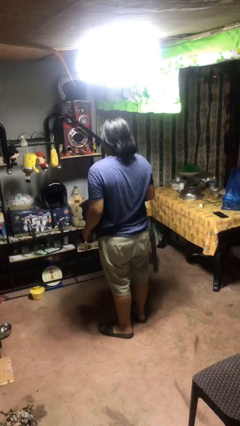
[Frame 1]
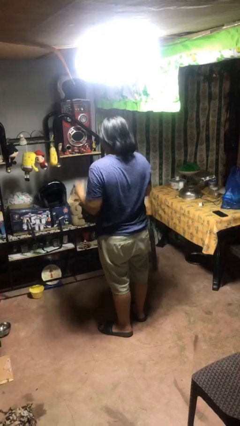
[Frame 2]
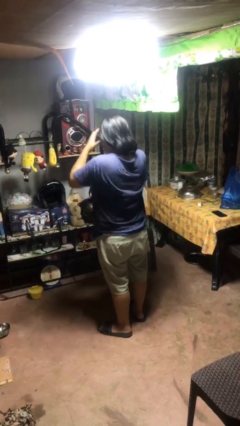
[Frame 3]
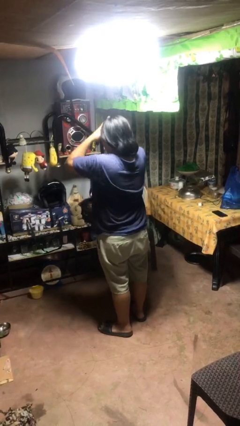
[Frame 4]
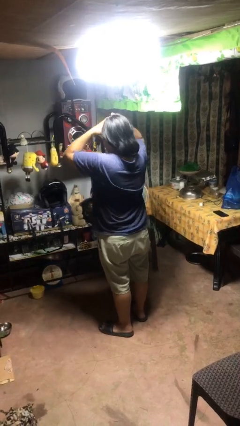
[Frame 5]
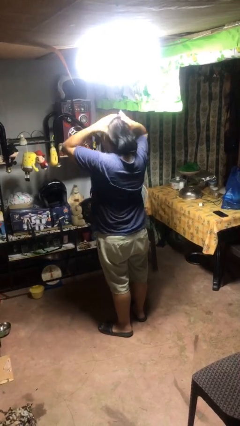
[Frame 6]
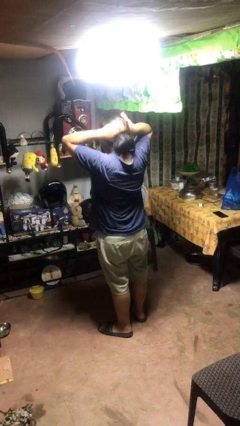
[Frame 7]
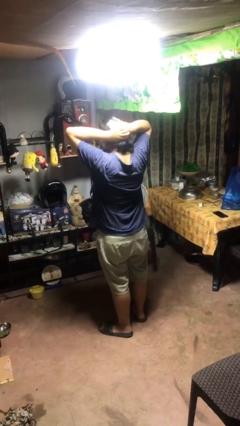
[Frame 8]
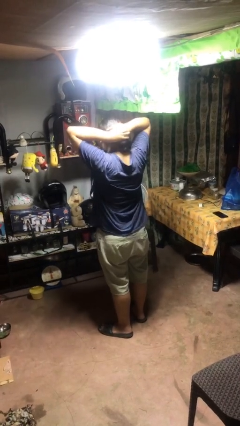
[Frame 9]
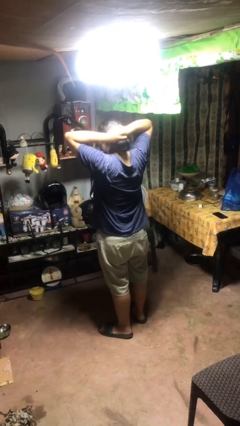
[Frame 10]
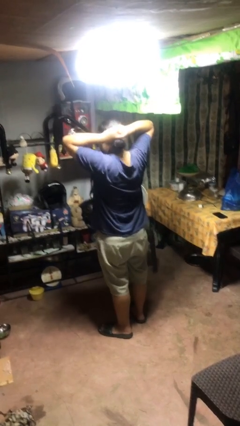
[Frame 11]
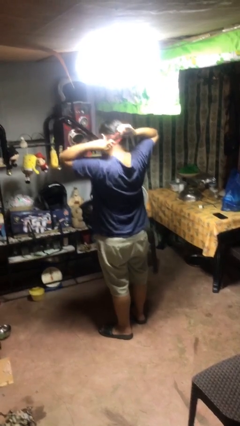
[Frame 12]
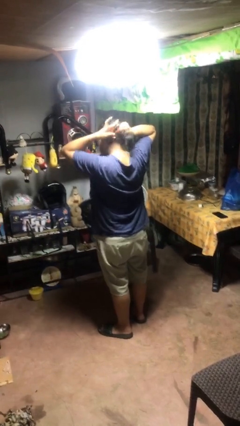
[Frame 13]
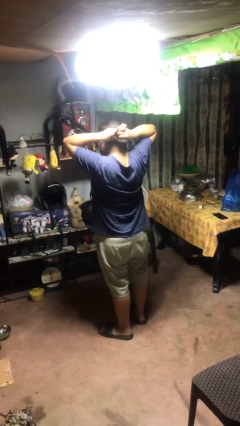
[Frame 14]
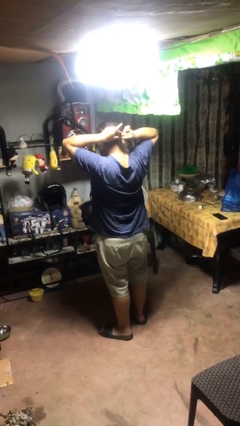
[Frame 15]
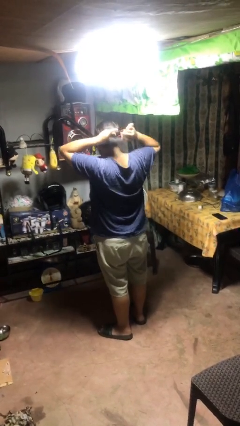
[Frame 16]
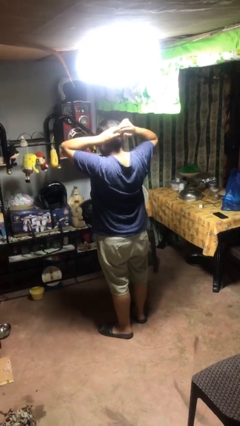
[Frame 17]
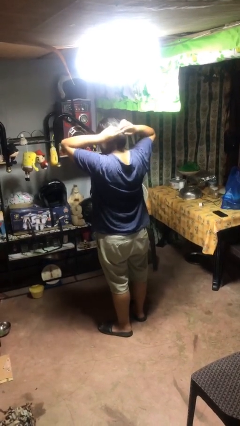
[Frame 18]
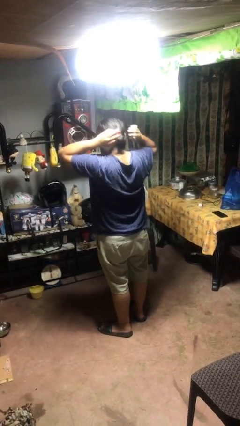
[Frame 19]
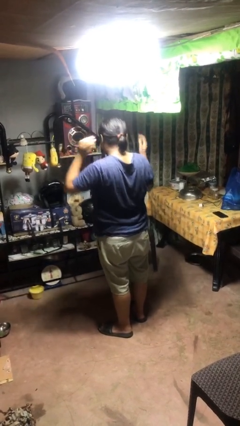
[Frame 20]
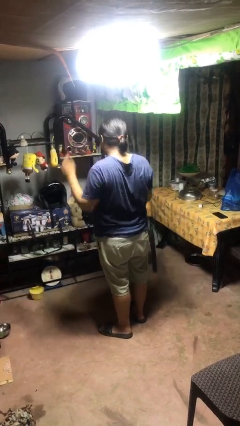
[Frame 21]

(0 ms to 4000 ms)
person puts hair in ponytail

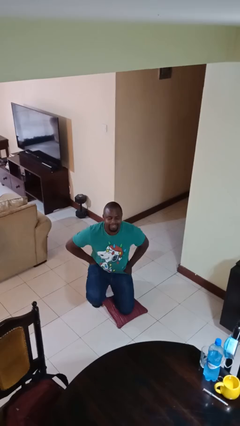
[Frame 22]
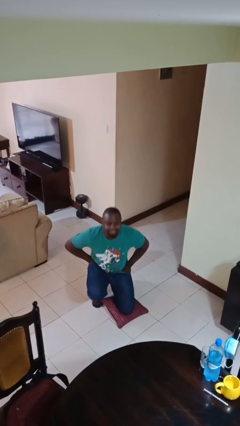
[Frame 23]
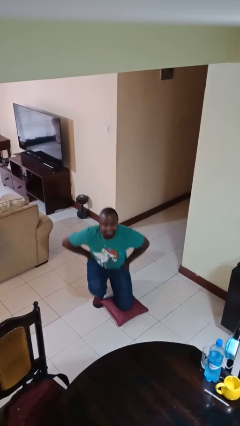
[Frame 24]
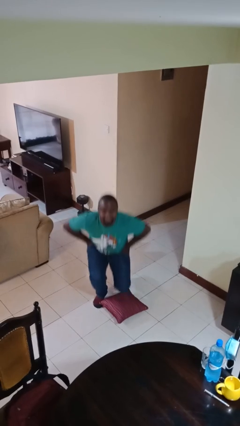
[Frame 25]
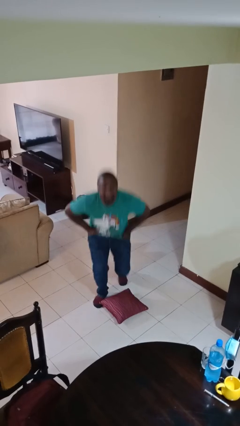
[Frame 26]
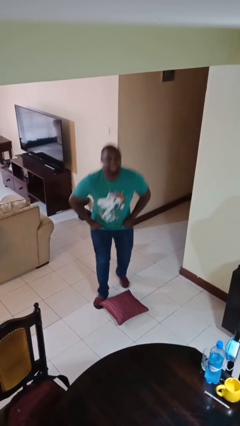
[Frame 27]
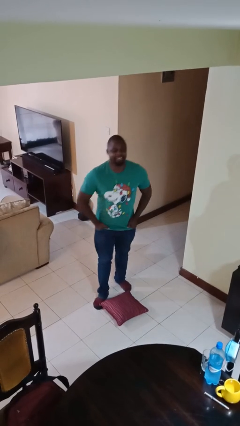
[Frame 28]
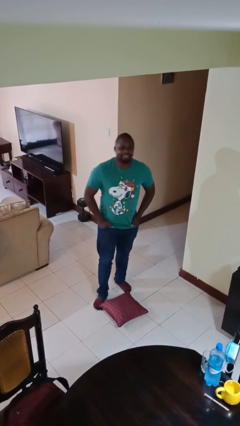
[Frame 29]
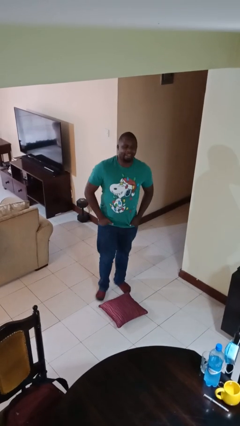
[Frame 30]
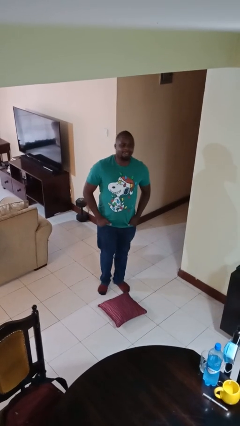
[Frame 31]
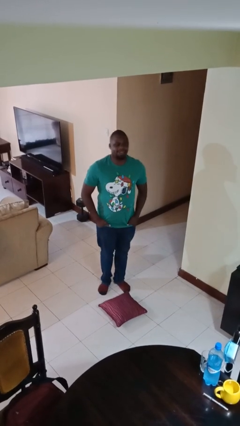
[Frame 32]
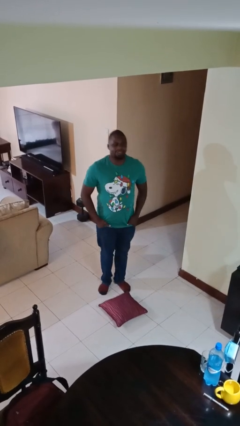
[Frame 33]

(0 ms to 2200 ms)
person stands up from floor

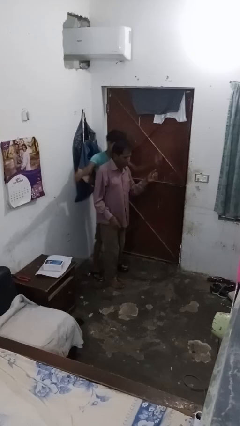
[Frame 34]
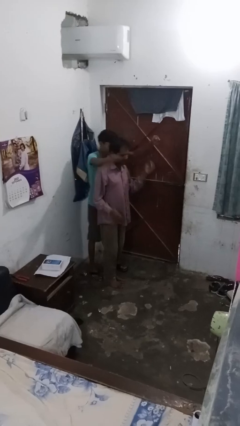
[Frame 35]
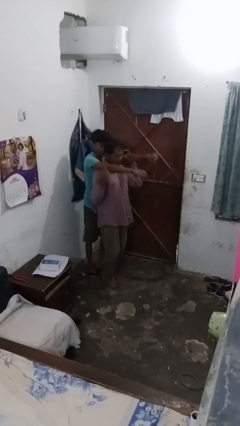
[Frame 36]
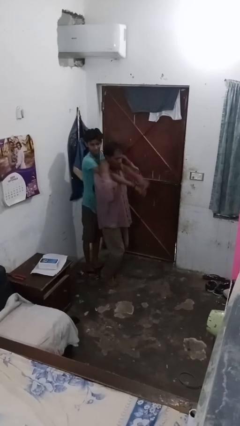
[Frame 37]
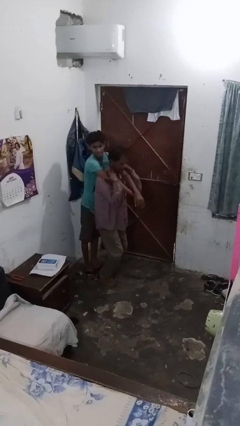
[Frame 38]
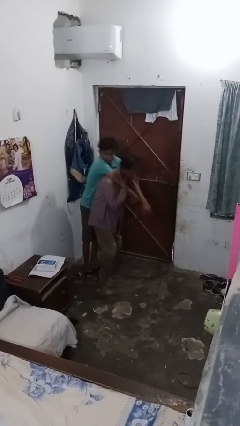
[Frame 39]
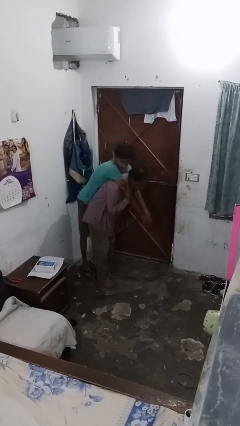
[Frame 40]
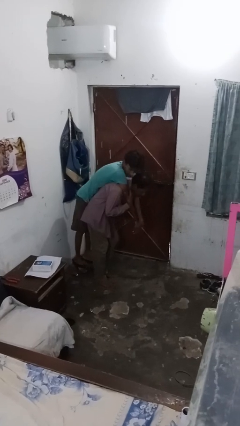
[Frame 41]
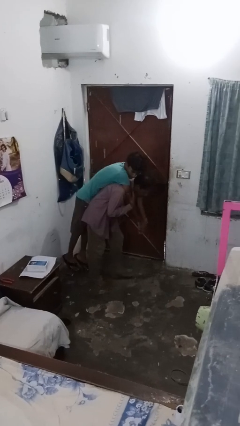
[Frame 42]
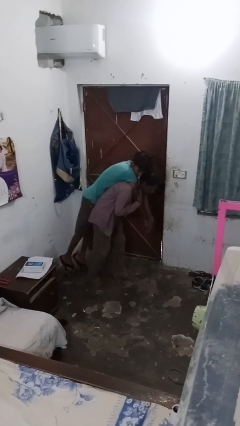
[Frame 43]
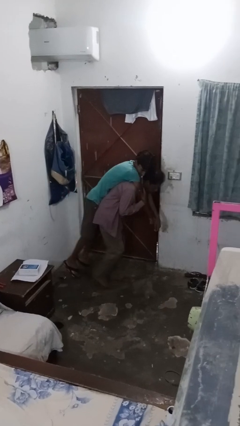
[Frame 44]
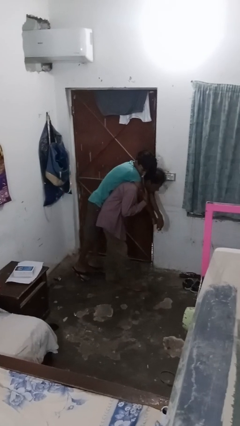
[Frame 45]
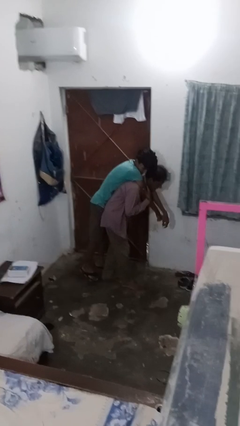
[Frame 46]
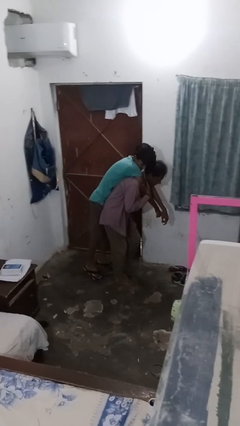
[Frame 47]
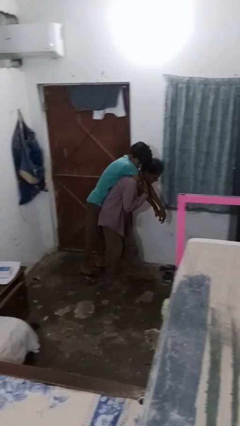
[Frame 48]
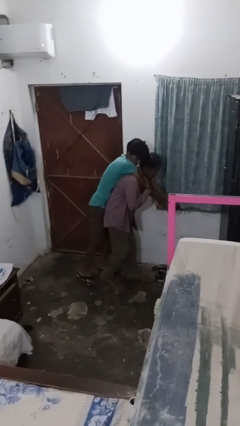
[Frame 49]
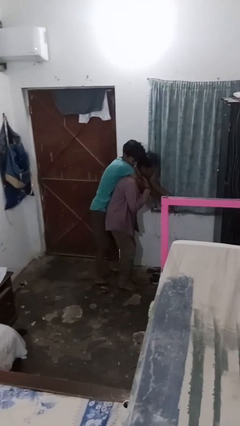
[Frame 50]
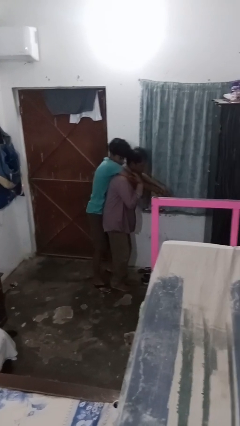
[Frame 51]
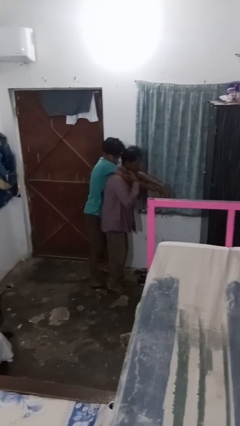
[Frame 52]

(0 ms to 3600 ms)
person carries person on back

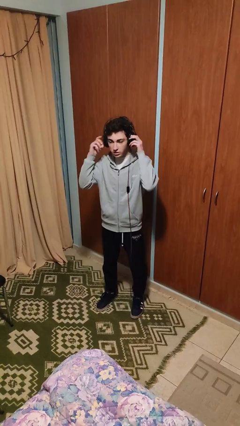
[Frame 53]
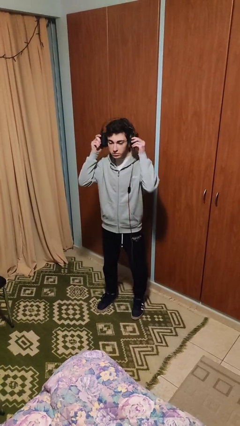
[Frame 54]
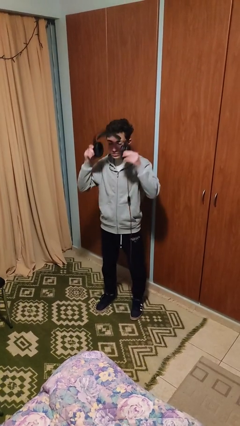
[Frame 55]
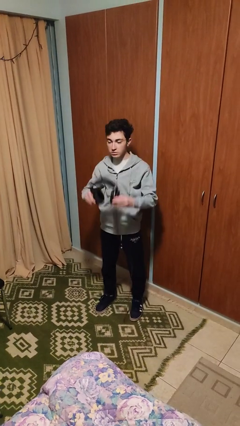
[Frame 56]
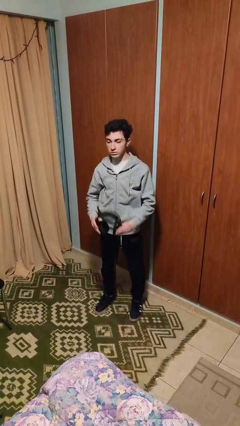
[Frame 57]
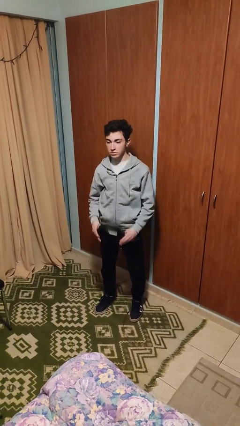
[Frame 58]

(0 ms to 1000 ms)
person takes off headphones

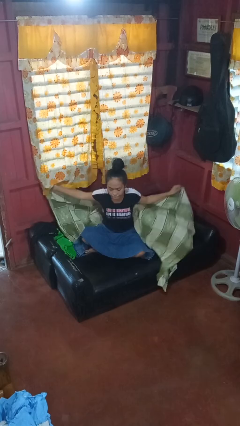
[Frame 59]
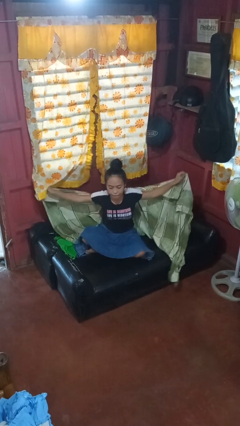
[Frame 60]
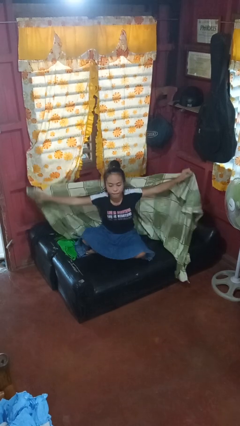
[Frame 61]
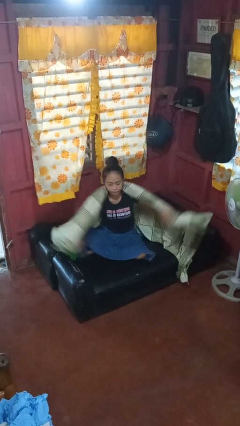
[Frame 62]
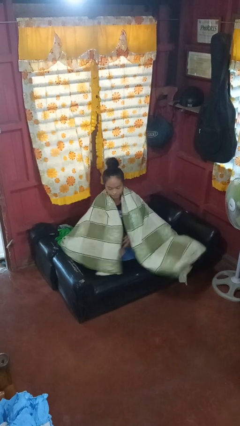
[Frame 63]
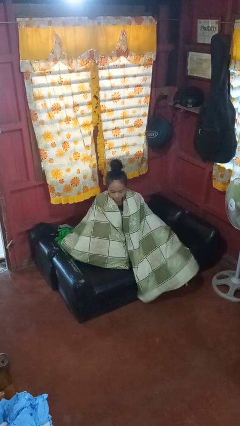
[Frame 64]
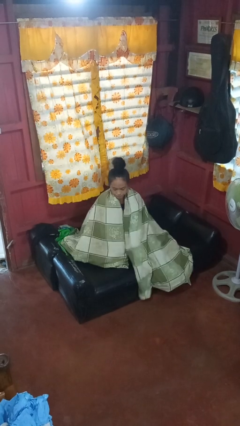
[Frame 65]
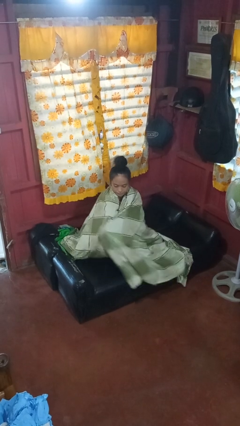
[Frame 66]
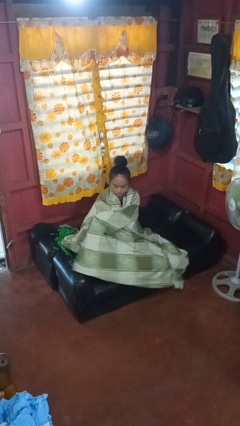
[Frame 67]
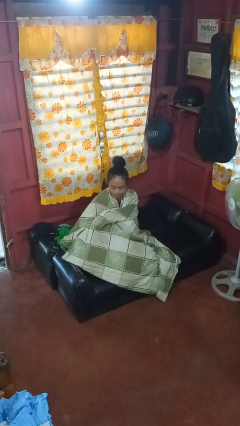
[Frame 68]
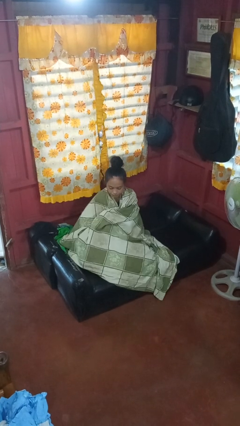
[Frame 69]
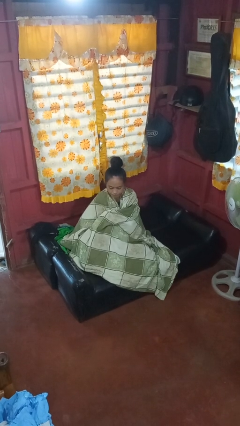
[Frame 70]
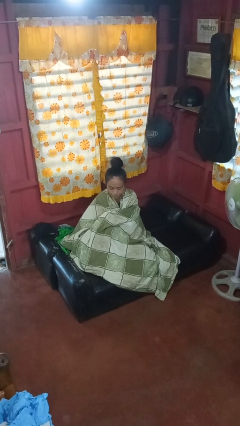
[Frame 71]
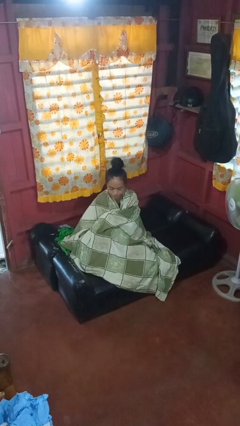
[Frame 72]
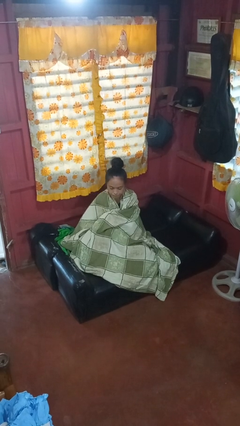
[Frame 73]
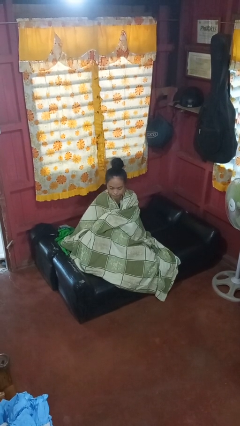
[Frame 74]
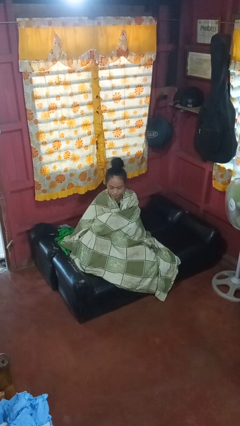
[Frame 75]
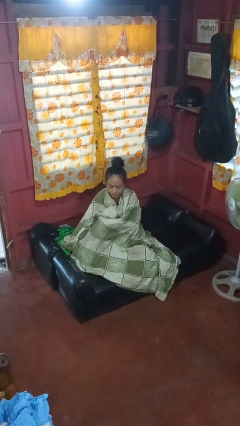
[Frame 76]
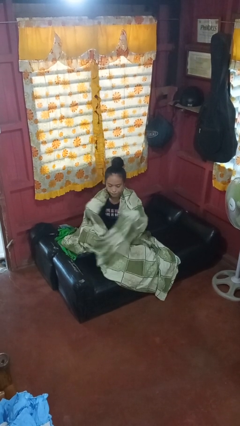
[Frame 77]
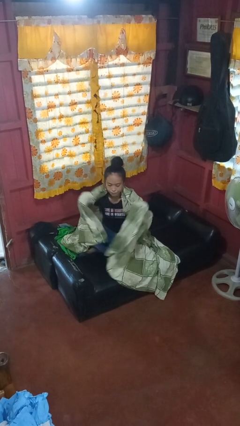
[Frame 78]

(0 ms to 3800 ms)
person covers with blanket

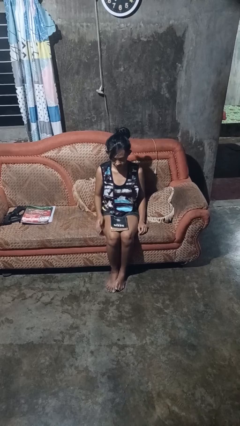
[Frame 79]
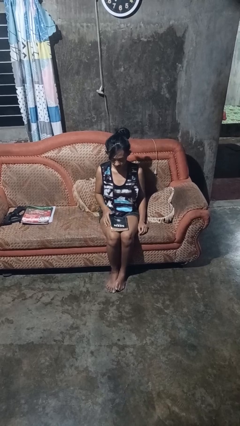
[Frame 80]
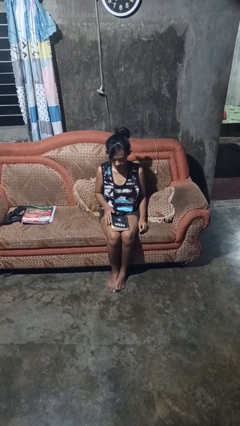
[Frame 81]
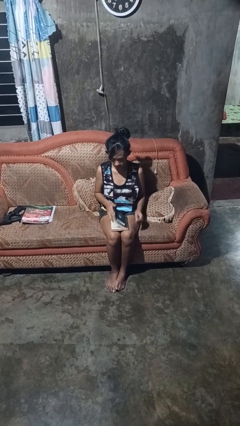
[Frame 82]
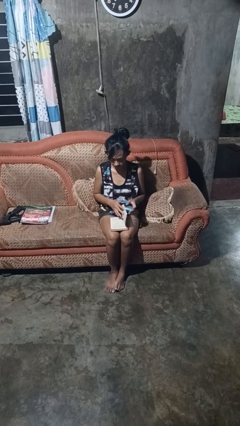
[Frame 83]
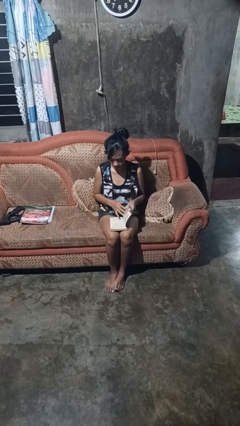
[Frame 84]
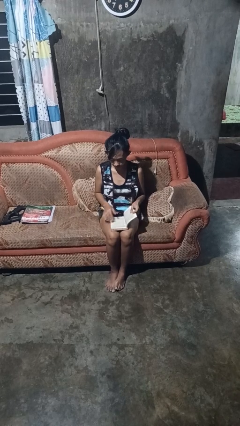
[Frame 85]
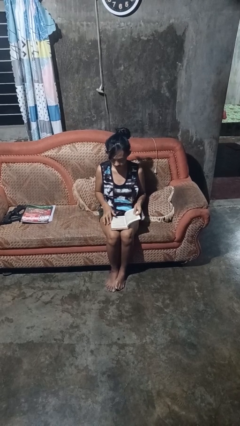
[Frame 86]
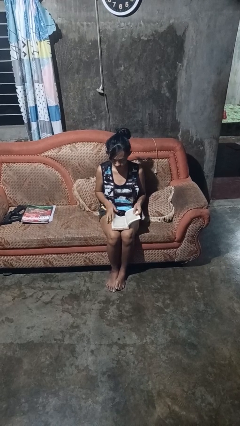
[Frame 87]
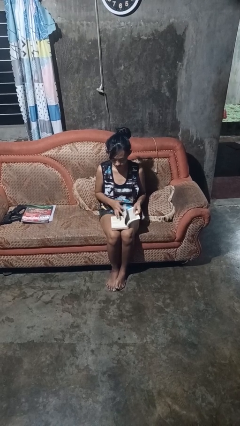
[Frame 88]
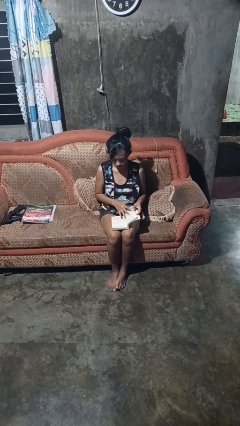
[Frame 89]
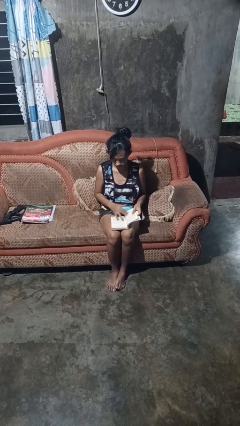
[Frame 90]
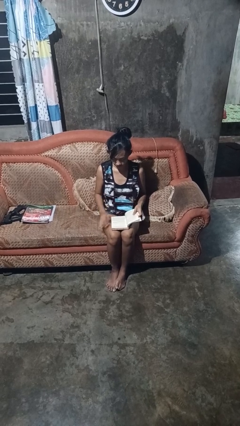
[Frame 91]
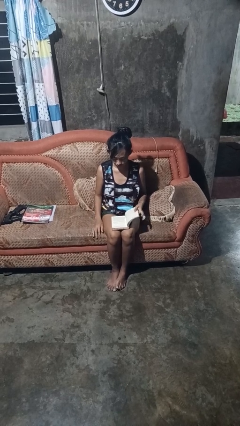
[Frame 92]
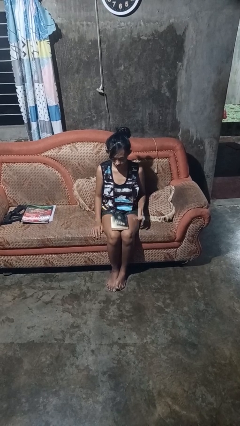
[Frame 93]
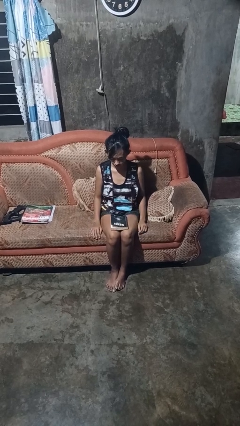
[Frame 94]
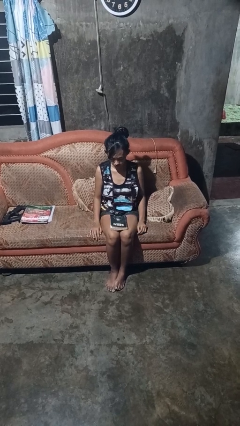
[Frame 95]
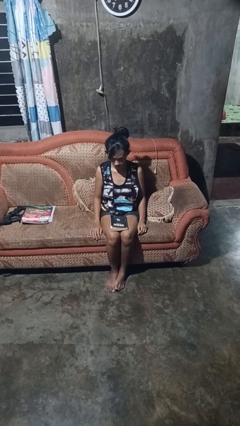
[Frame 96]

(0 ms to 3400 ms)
person reads book
